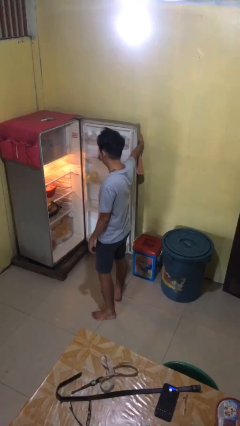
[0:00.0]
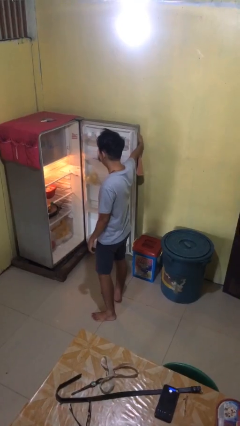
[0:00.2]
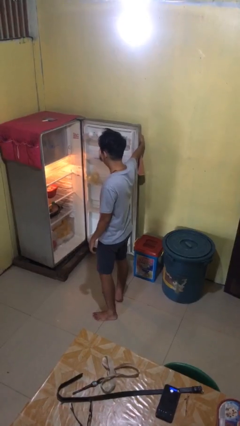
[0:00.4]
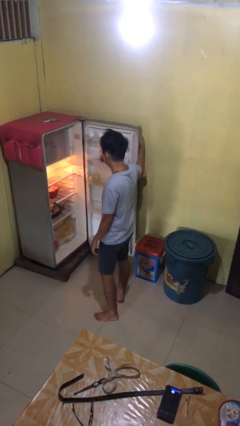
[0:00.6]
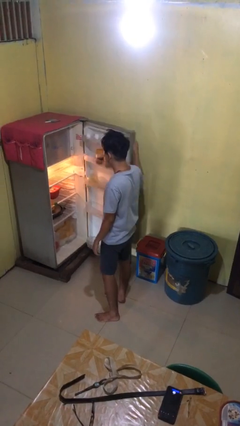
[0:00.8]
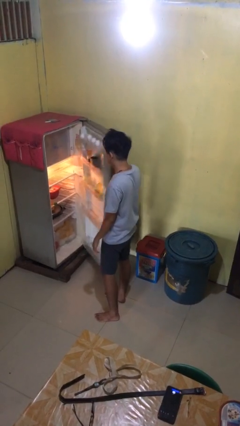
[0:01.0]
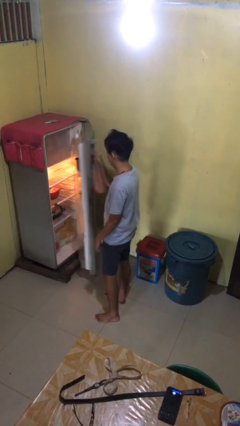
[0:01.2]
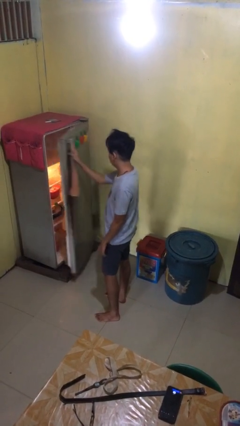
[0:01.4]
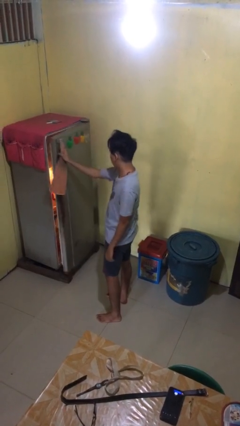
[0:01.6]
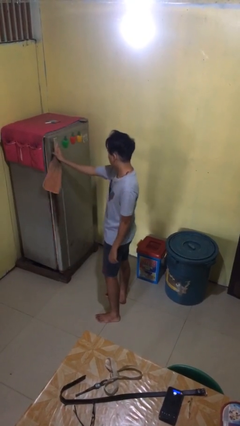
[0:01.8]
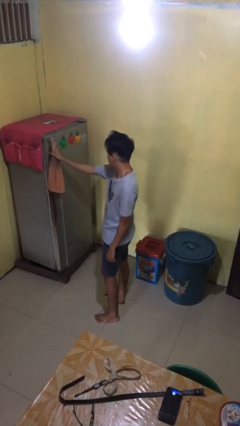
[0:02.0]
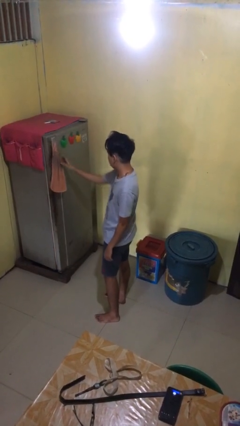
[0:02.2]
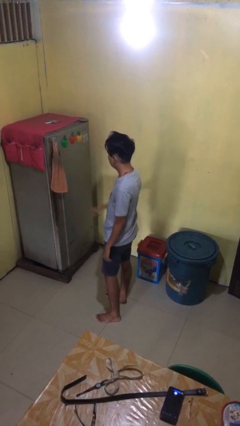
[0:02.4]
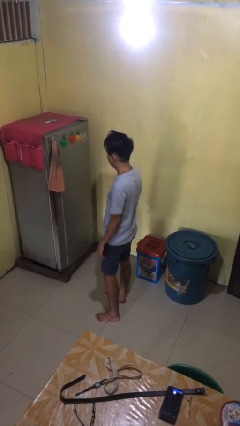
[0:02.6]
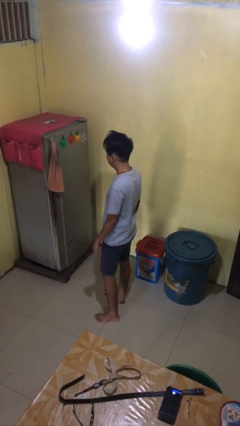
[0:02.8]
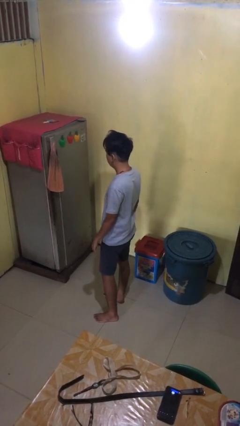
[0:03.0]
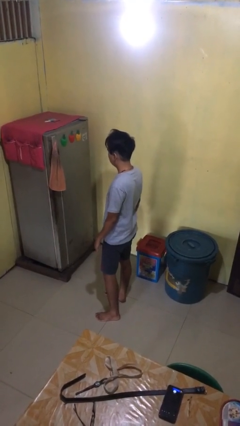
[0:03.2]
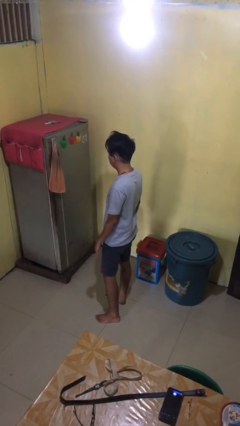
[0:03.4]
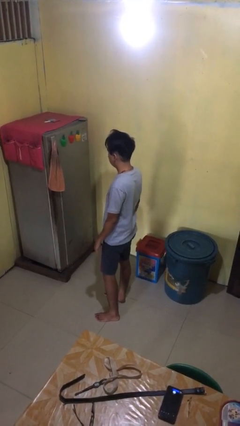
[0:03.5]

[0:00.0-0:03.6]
person closes refrigerator

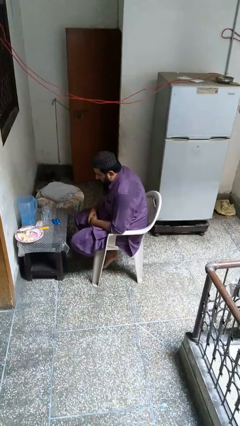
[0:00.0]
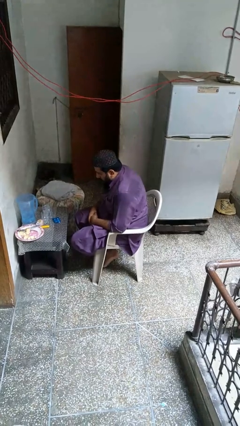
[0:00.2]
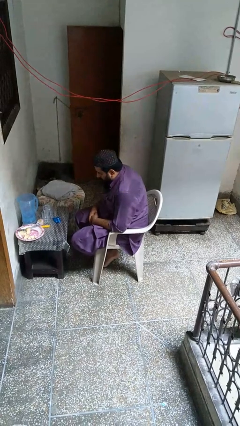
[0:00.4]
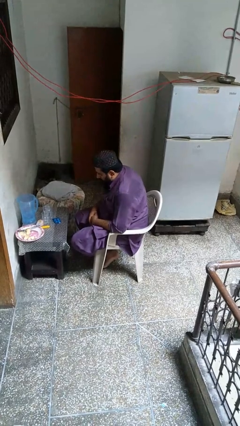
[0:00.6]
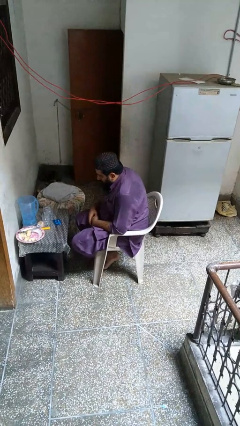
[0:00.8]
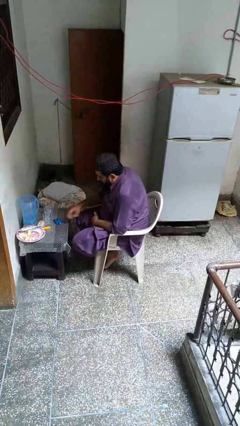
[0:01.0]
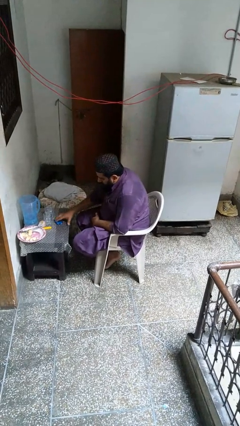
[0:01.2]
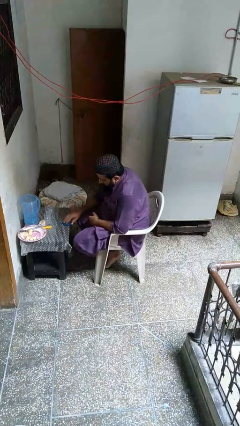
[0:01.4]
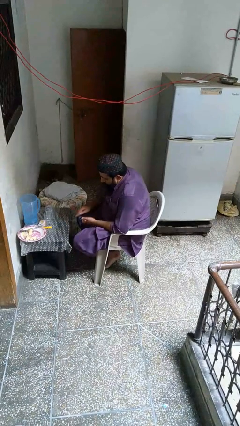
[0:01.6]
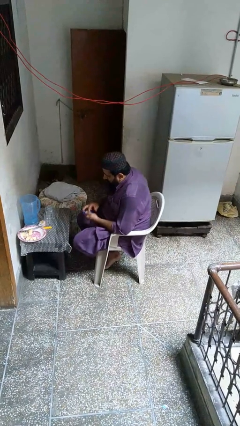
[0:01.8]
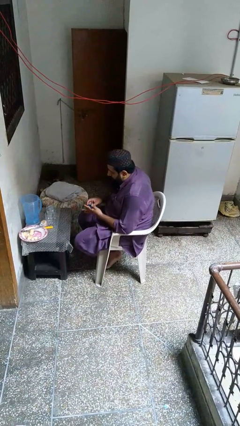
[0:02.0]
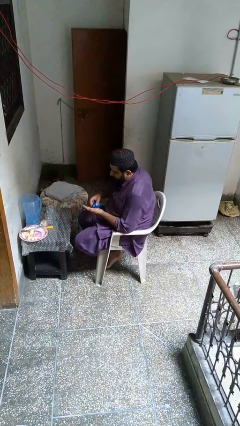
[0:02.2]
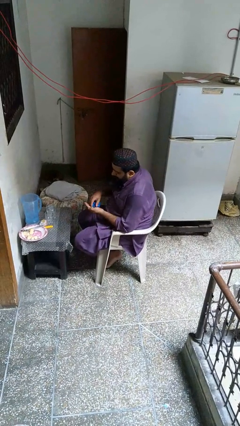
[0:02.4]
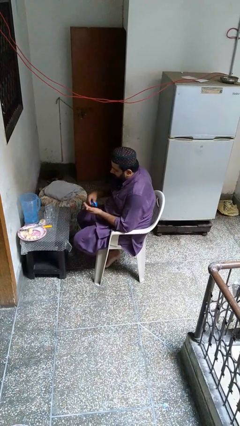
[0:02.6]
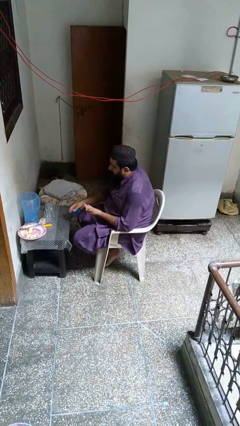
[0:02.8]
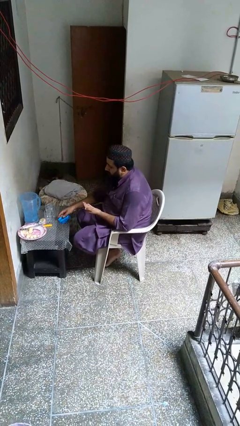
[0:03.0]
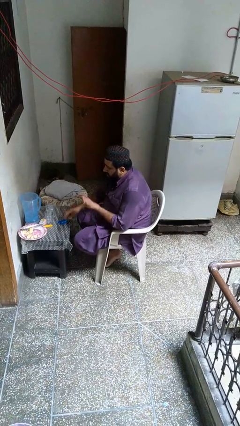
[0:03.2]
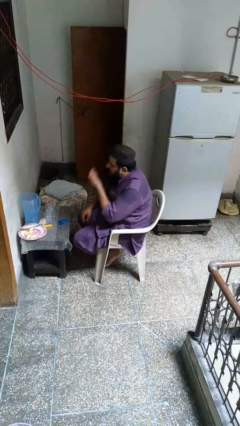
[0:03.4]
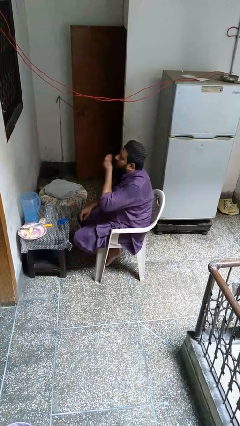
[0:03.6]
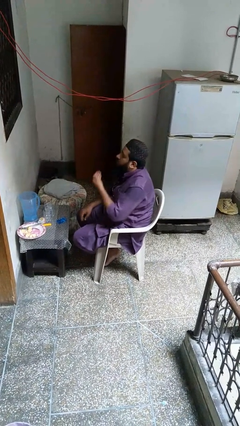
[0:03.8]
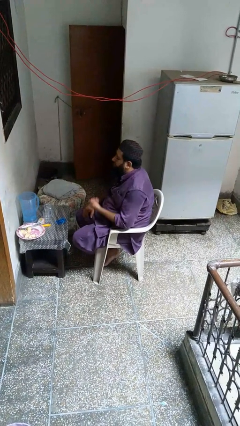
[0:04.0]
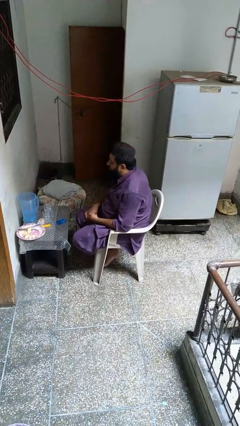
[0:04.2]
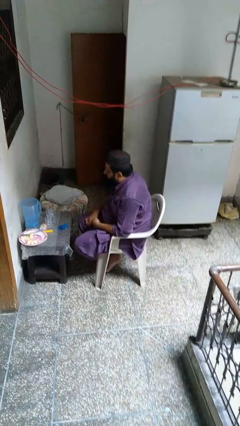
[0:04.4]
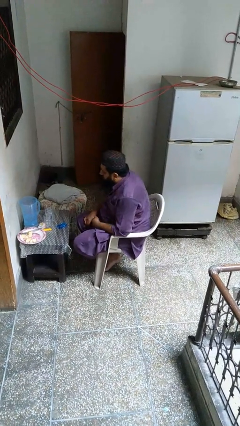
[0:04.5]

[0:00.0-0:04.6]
person takes medicine pills

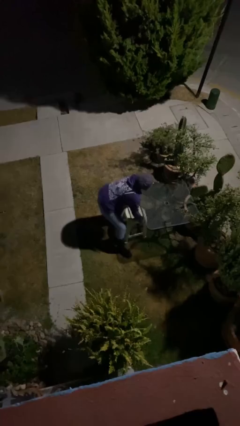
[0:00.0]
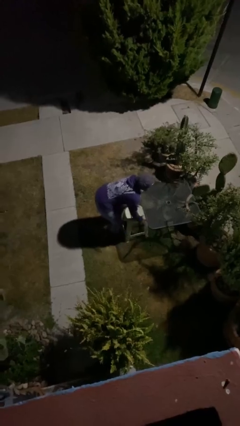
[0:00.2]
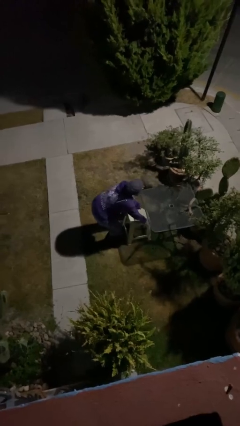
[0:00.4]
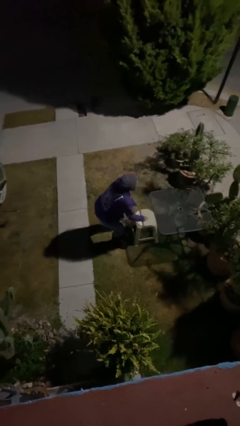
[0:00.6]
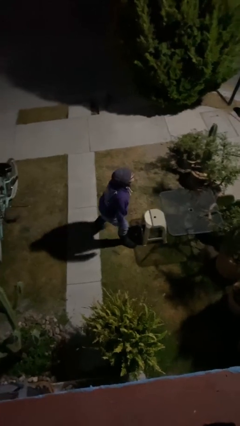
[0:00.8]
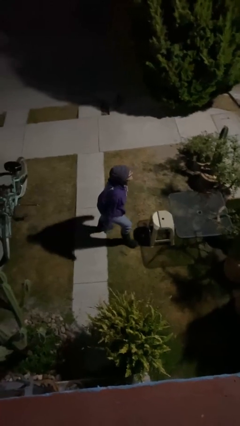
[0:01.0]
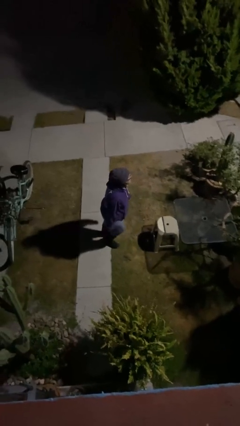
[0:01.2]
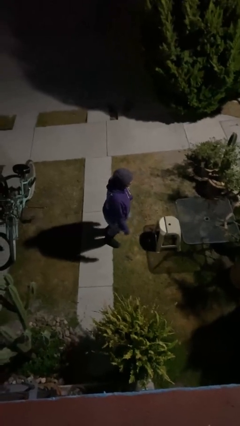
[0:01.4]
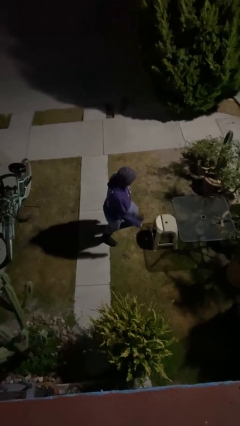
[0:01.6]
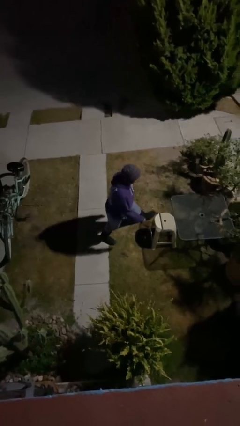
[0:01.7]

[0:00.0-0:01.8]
person stands up

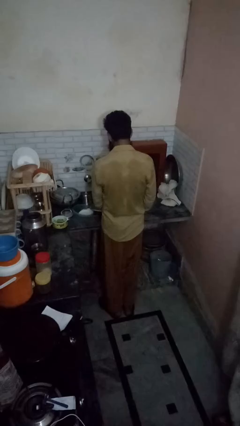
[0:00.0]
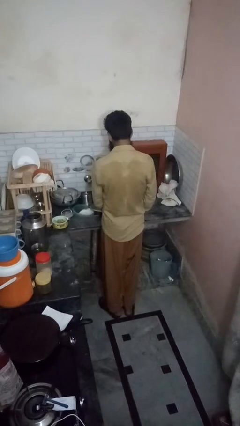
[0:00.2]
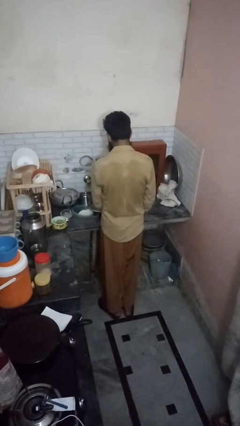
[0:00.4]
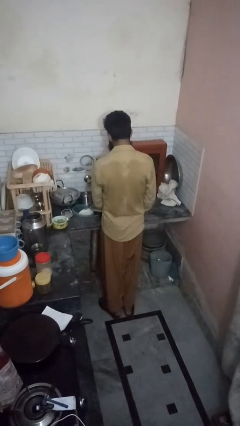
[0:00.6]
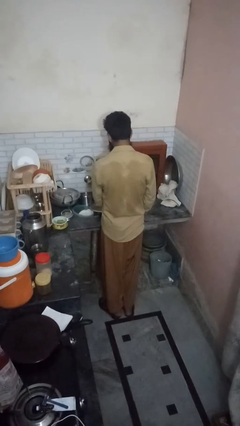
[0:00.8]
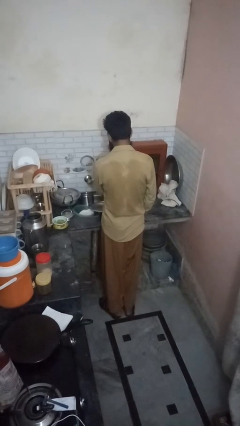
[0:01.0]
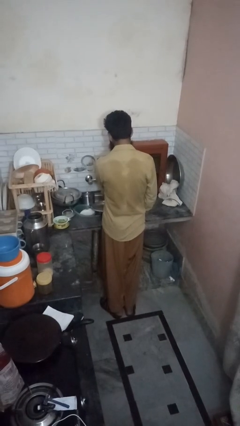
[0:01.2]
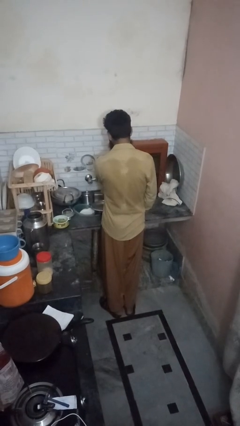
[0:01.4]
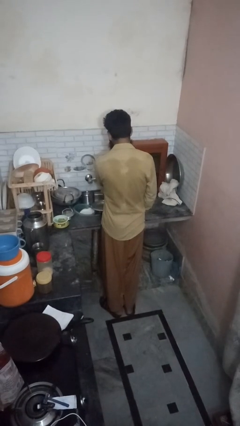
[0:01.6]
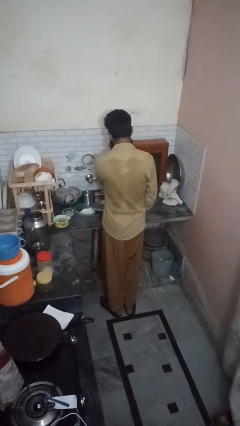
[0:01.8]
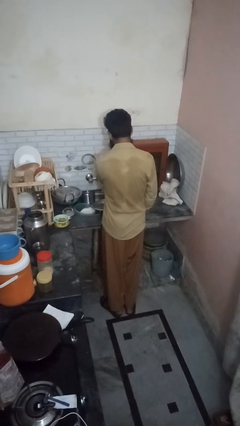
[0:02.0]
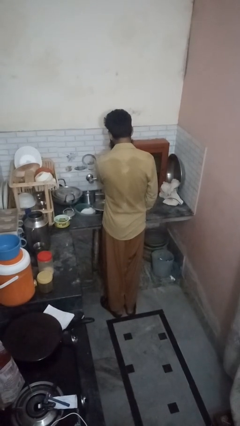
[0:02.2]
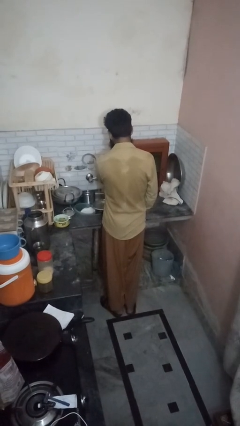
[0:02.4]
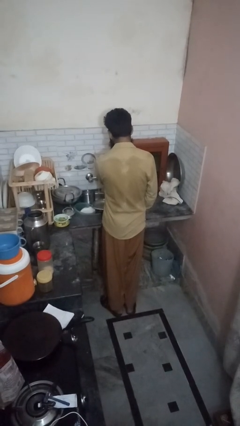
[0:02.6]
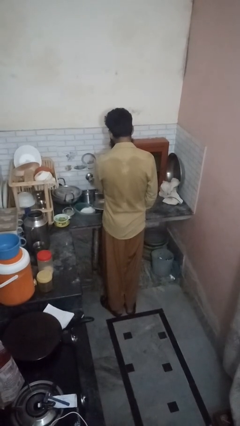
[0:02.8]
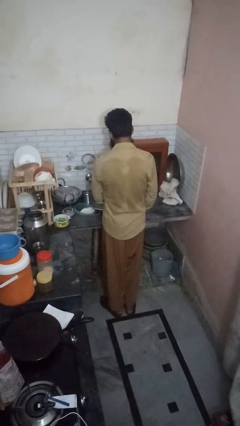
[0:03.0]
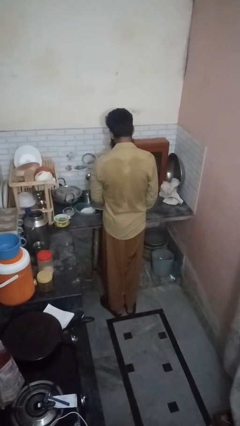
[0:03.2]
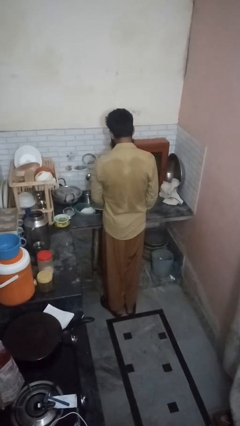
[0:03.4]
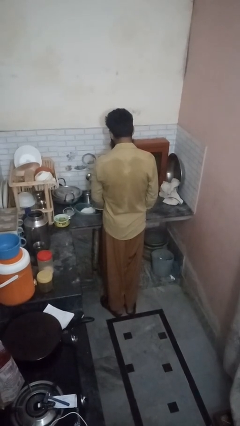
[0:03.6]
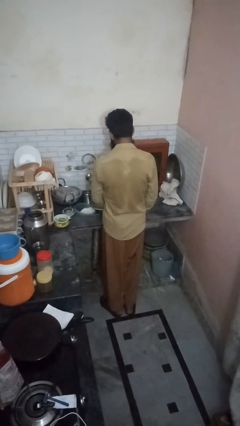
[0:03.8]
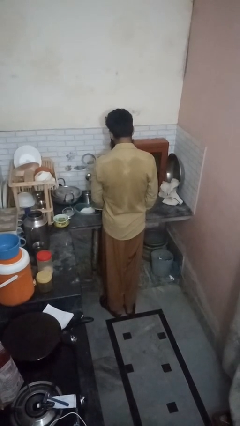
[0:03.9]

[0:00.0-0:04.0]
person opens dishwasher

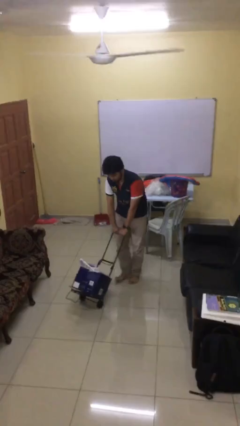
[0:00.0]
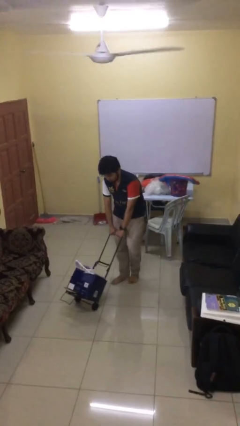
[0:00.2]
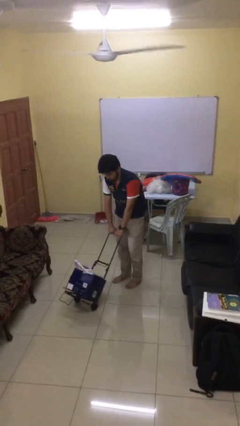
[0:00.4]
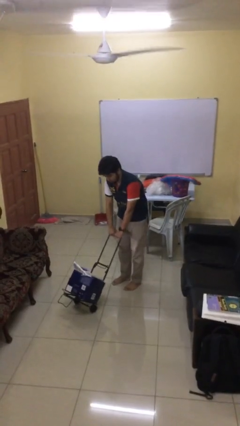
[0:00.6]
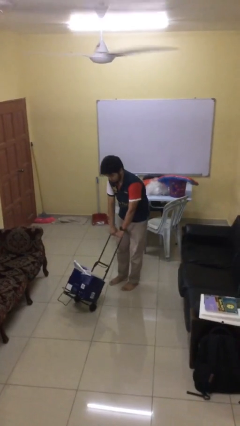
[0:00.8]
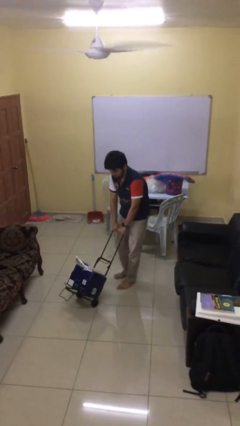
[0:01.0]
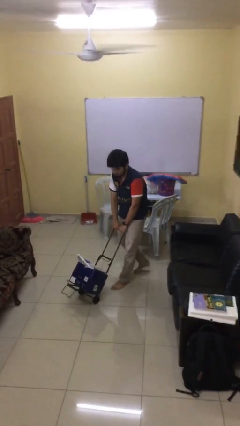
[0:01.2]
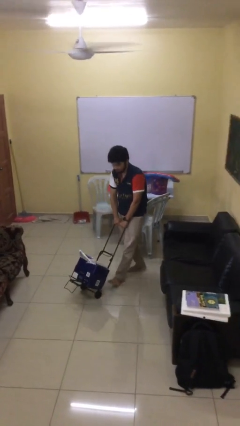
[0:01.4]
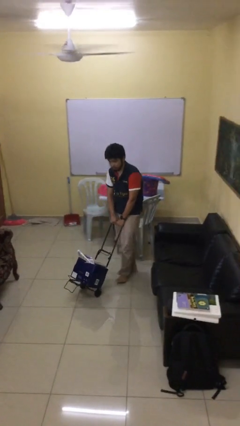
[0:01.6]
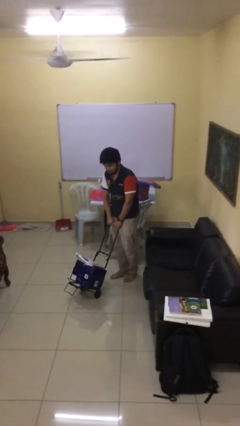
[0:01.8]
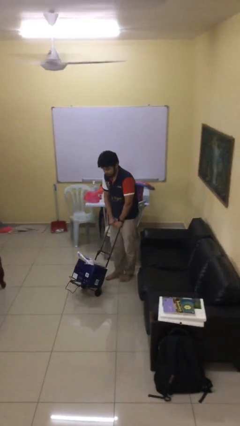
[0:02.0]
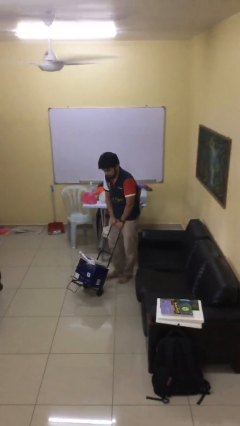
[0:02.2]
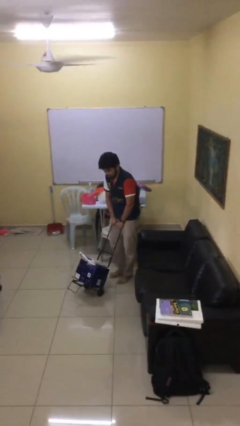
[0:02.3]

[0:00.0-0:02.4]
person pulls wheeled cart

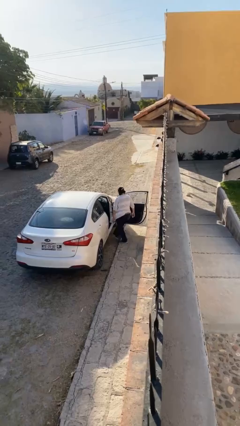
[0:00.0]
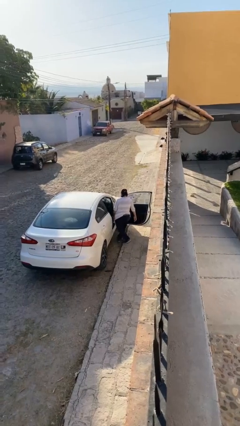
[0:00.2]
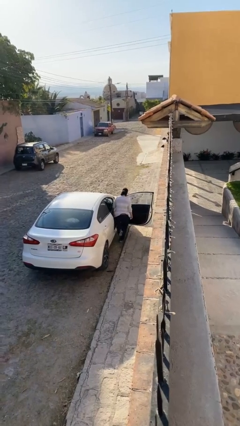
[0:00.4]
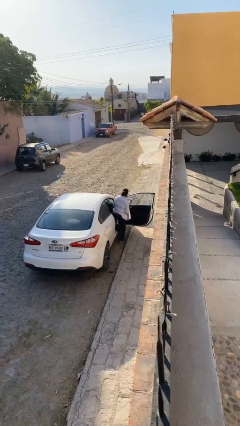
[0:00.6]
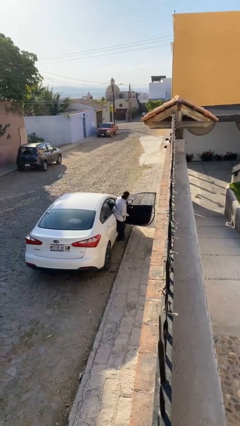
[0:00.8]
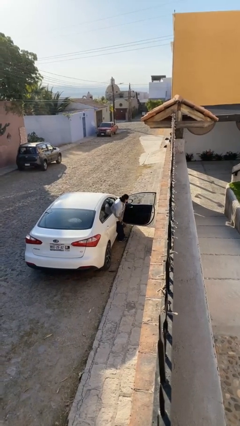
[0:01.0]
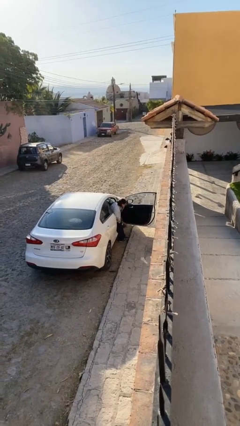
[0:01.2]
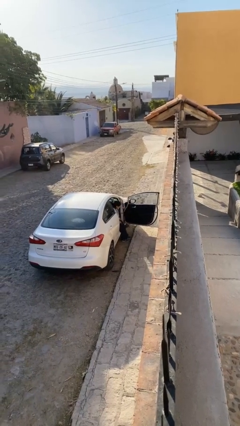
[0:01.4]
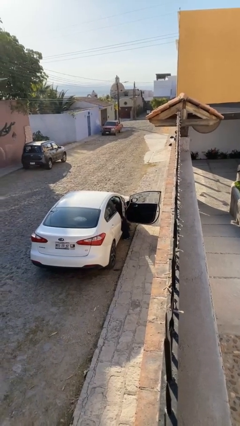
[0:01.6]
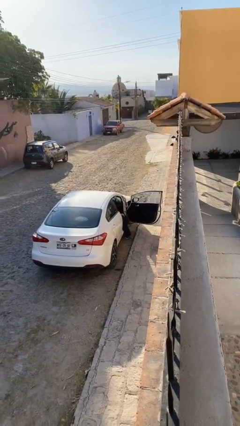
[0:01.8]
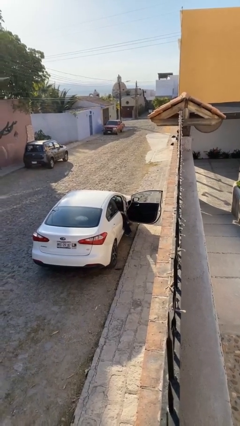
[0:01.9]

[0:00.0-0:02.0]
person enters car
